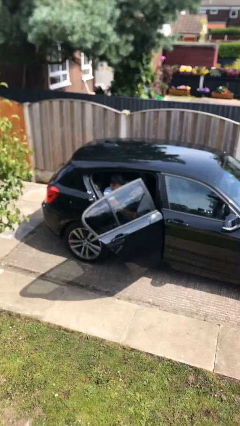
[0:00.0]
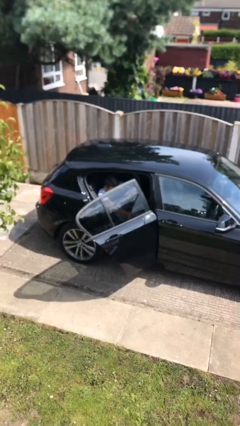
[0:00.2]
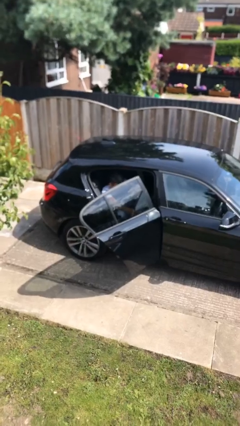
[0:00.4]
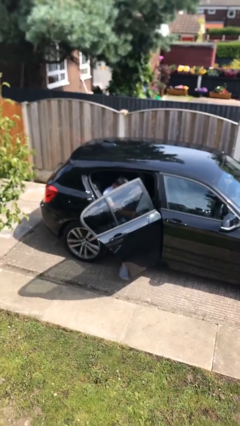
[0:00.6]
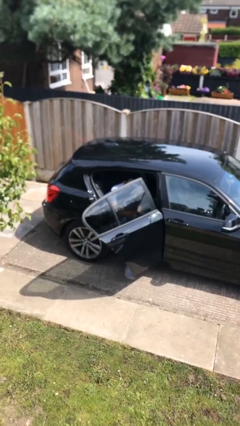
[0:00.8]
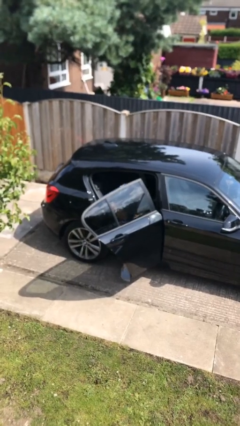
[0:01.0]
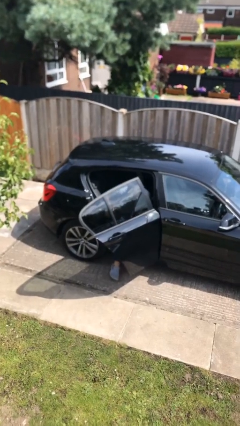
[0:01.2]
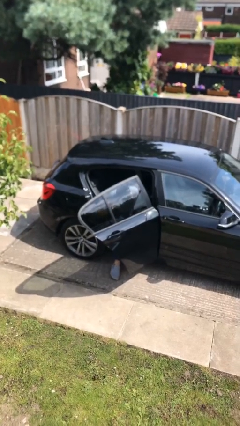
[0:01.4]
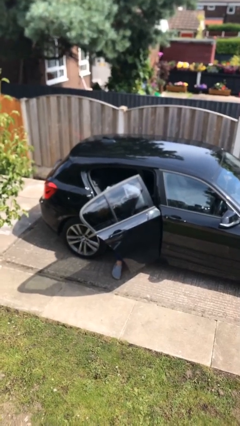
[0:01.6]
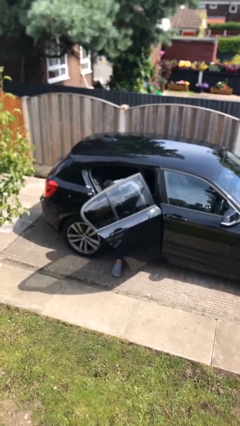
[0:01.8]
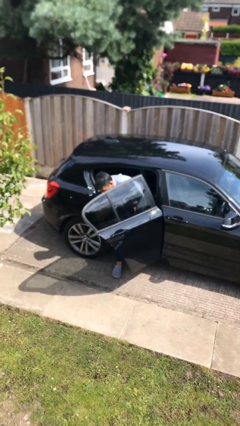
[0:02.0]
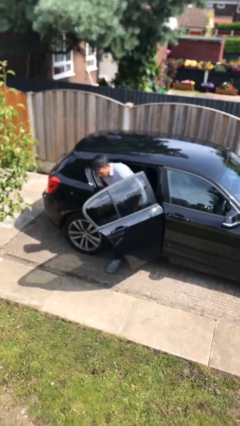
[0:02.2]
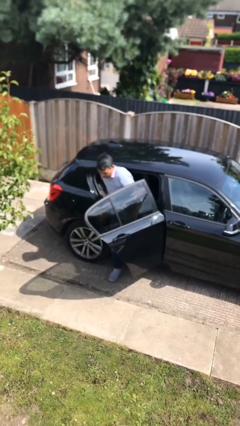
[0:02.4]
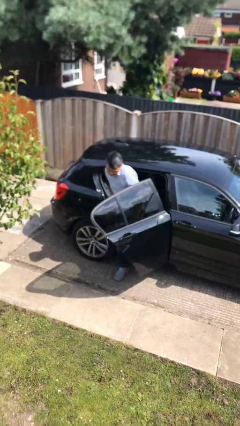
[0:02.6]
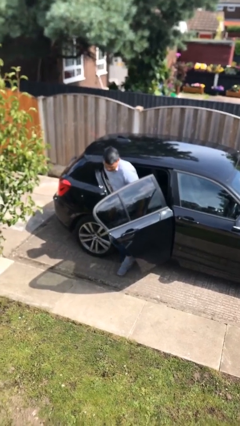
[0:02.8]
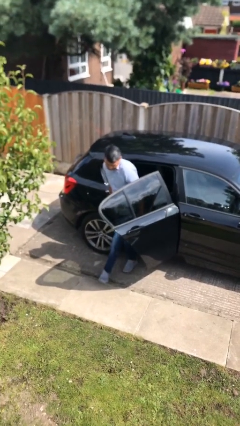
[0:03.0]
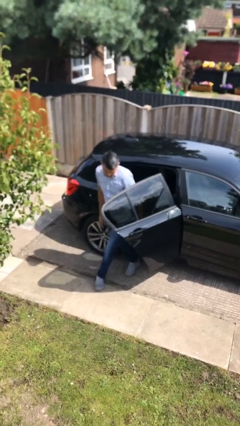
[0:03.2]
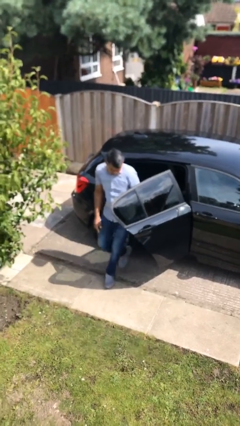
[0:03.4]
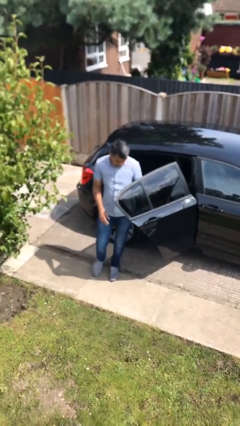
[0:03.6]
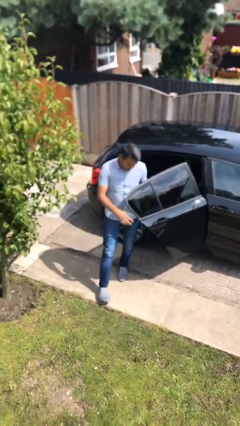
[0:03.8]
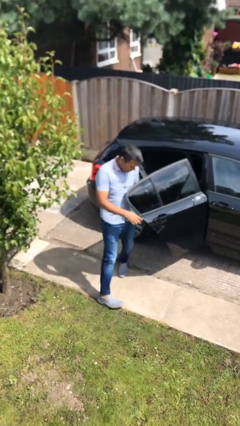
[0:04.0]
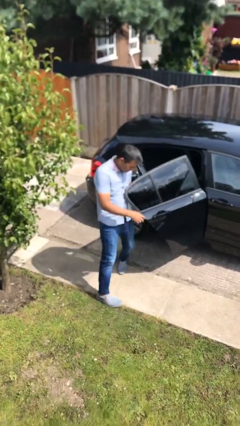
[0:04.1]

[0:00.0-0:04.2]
person exits car

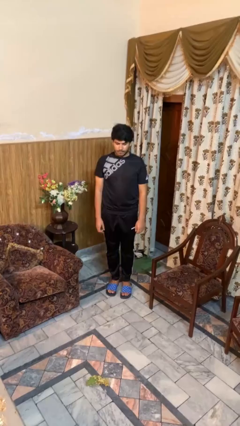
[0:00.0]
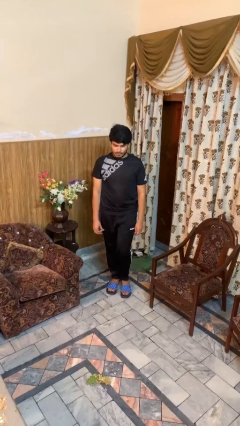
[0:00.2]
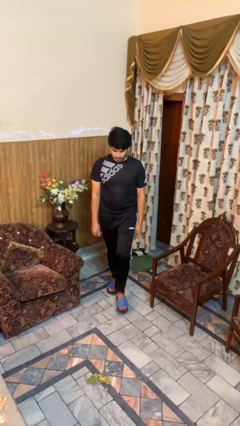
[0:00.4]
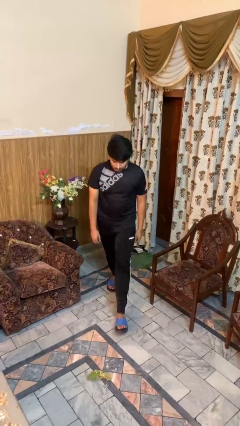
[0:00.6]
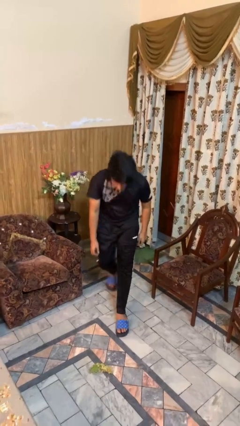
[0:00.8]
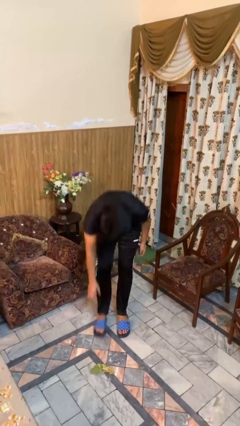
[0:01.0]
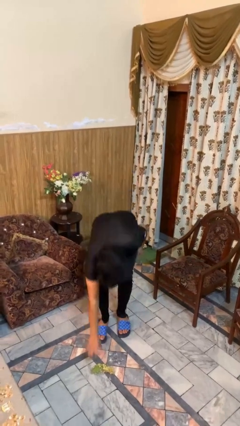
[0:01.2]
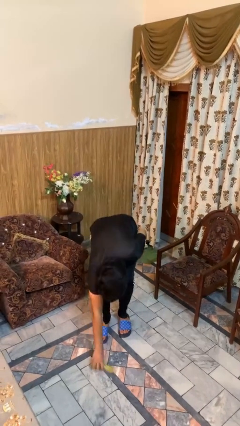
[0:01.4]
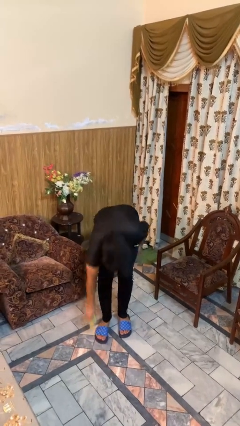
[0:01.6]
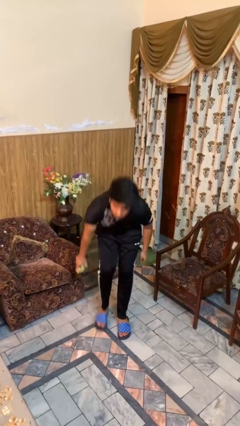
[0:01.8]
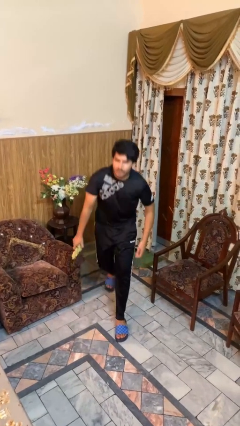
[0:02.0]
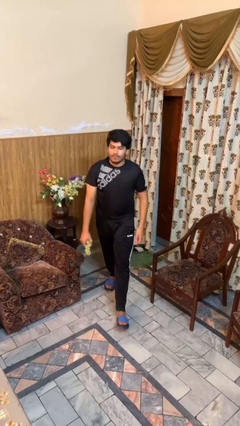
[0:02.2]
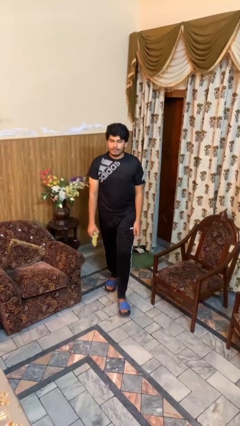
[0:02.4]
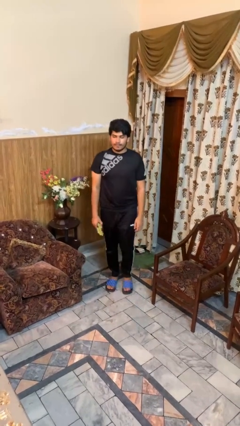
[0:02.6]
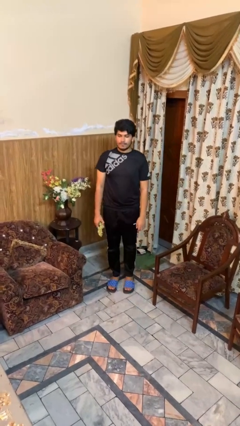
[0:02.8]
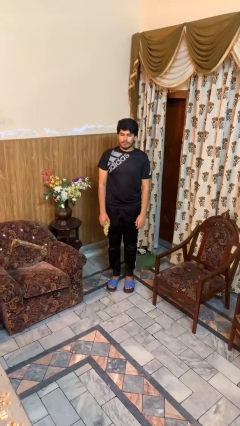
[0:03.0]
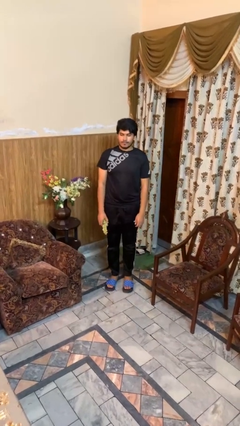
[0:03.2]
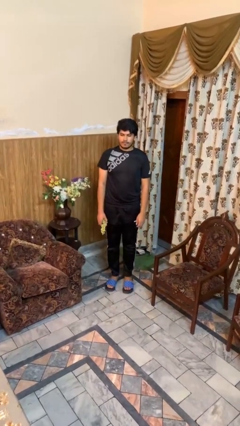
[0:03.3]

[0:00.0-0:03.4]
person picks up object from floor

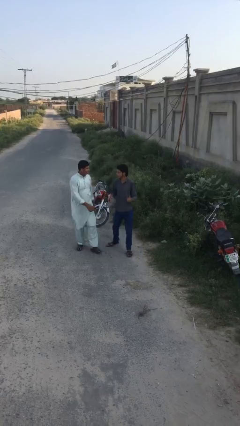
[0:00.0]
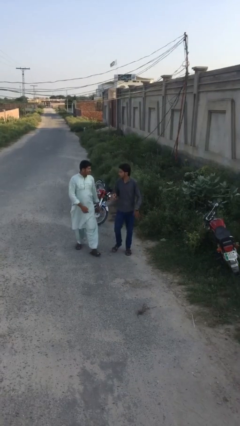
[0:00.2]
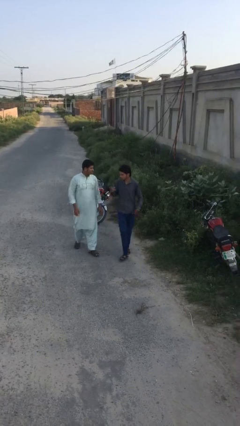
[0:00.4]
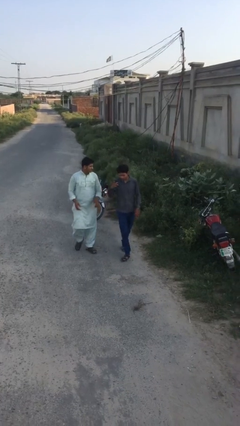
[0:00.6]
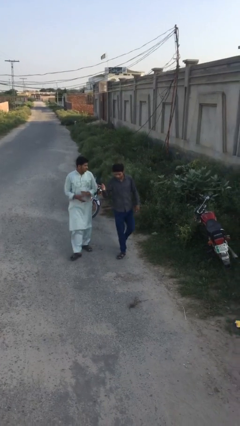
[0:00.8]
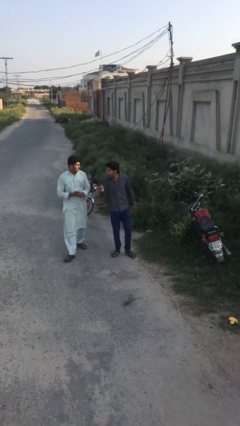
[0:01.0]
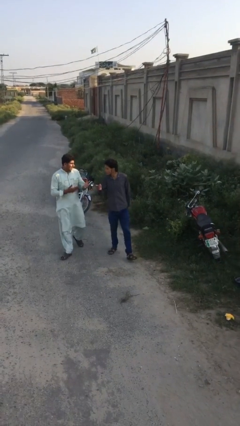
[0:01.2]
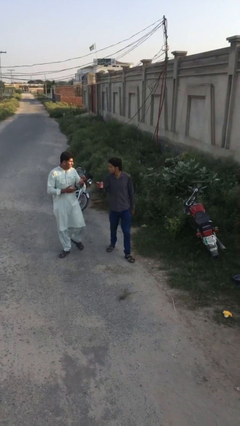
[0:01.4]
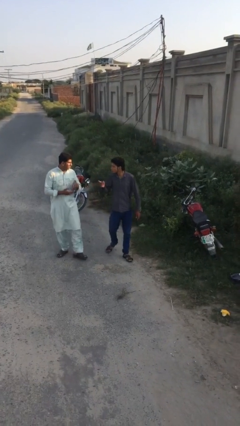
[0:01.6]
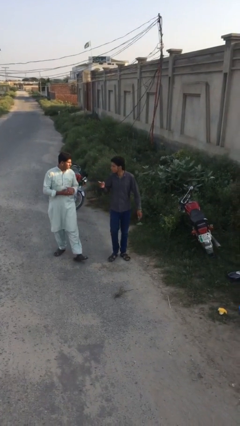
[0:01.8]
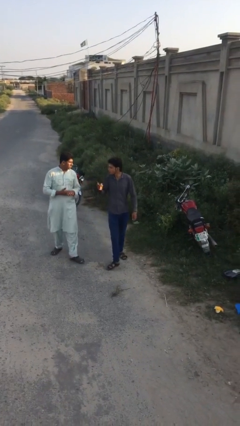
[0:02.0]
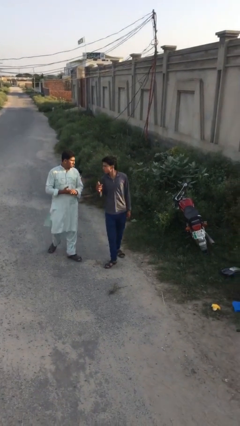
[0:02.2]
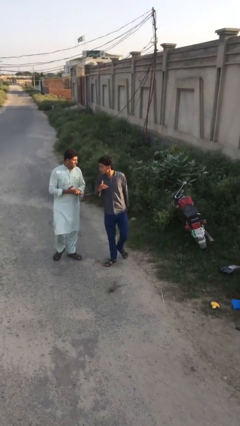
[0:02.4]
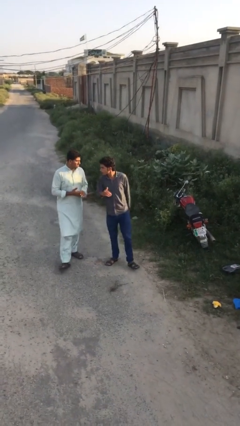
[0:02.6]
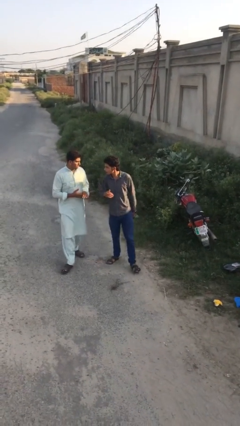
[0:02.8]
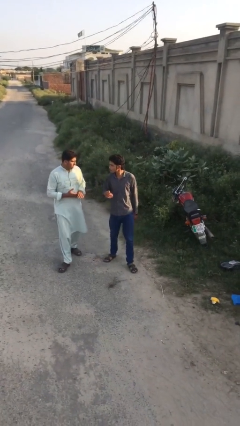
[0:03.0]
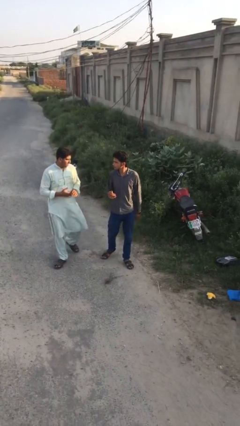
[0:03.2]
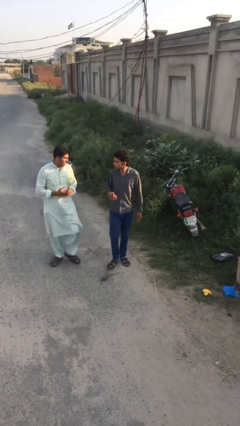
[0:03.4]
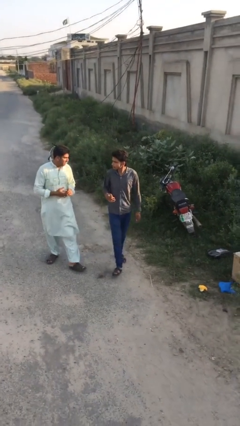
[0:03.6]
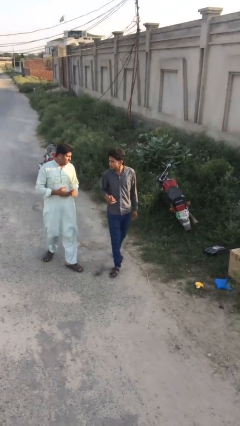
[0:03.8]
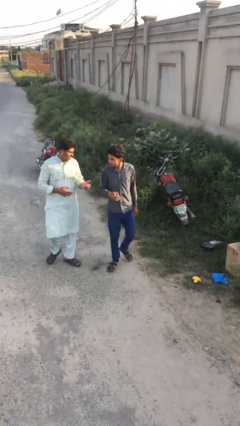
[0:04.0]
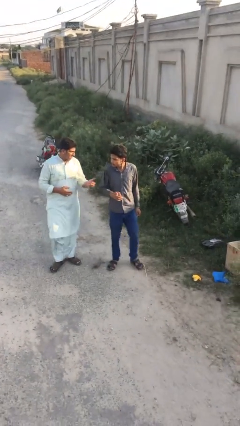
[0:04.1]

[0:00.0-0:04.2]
person talks to person

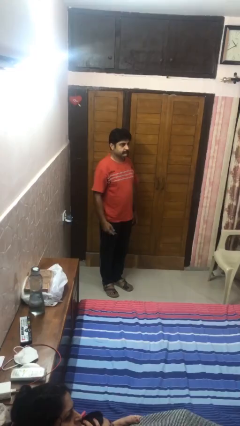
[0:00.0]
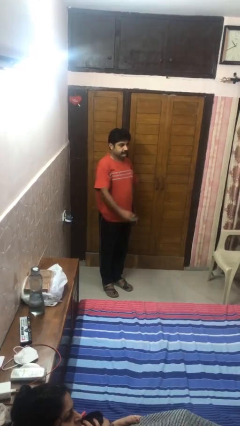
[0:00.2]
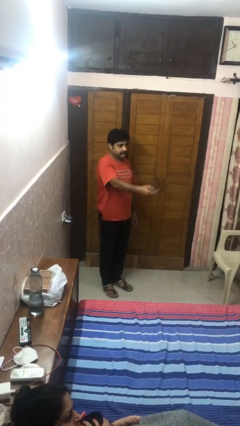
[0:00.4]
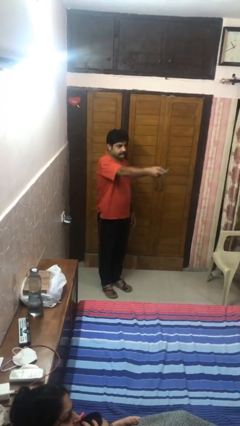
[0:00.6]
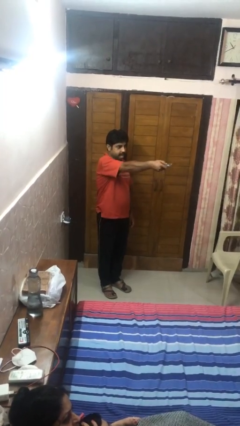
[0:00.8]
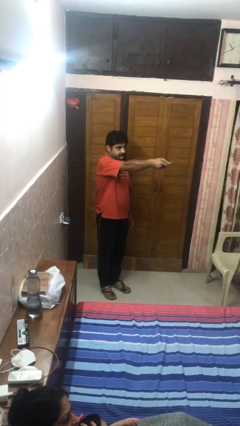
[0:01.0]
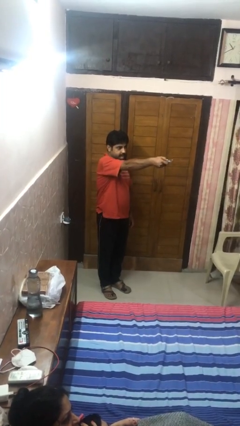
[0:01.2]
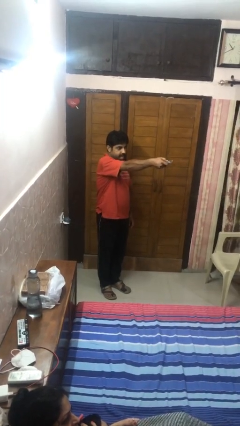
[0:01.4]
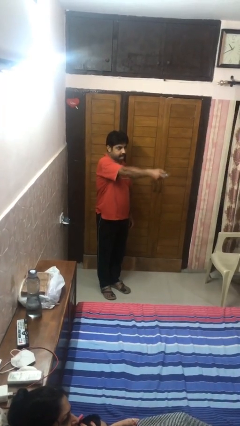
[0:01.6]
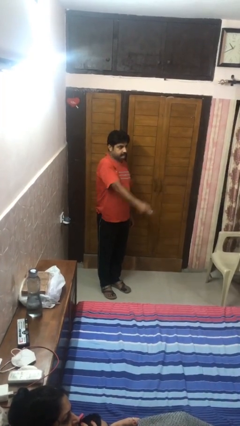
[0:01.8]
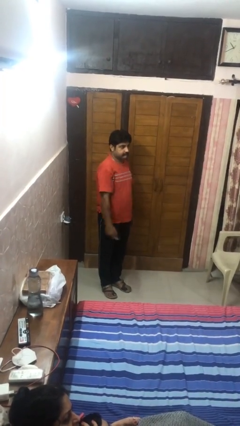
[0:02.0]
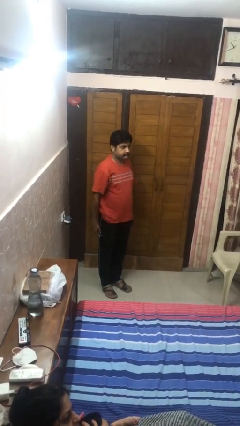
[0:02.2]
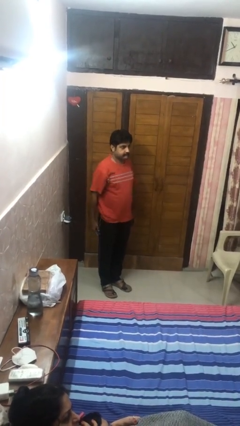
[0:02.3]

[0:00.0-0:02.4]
person uses television remote

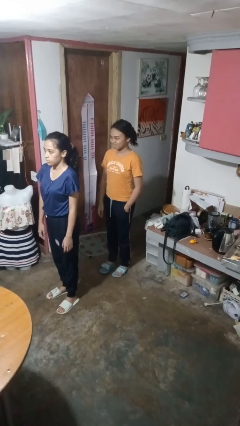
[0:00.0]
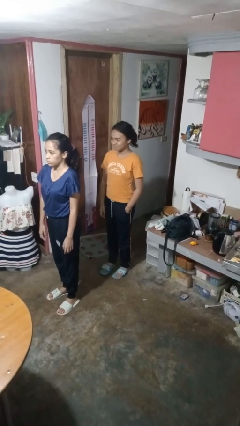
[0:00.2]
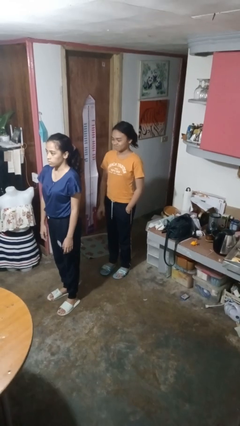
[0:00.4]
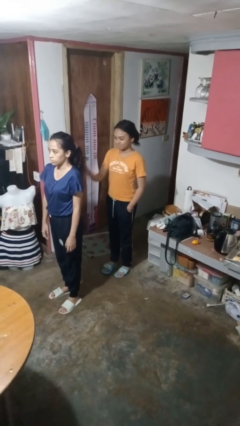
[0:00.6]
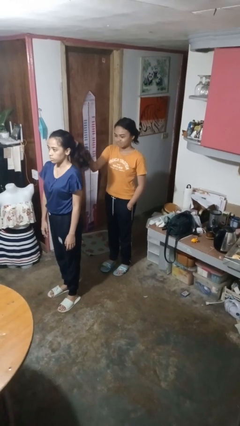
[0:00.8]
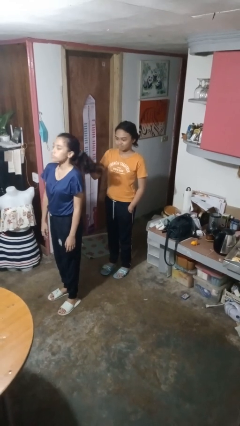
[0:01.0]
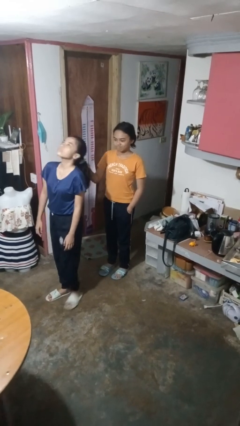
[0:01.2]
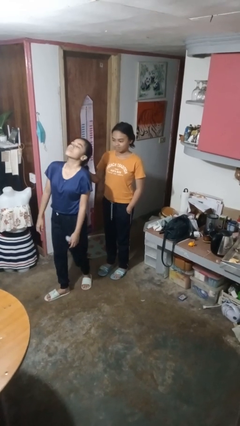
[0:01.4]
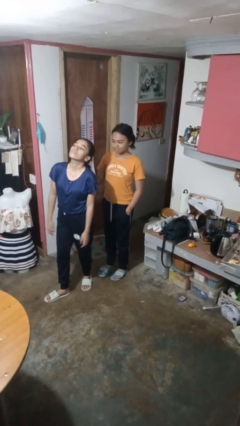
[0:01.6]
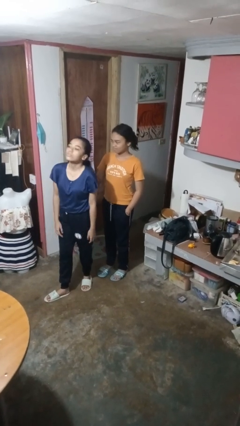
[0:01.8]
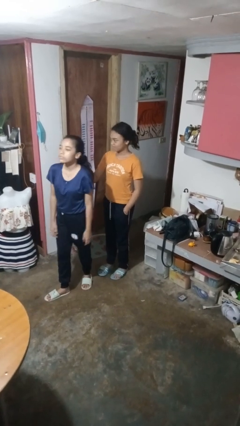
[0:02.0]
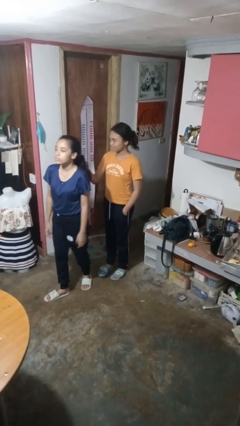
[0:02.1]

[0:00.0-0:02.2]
person grabs person by hair

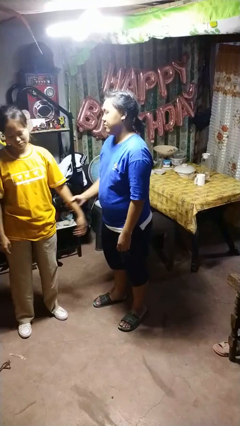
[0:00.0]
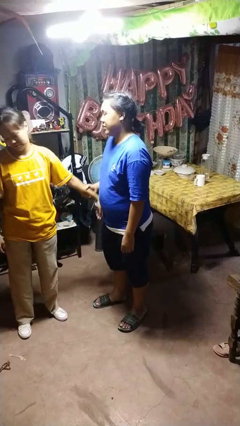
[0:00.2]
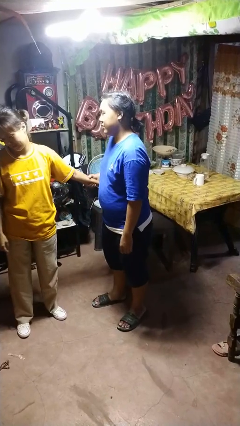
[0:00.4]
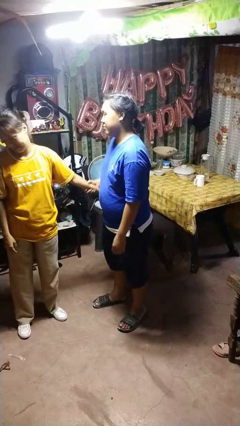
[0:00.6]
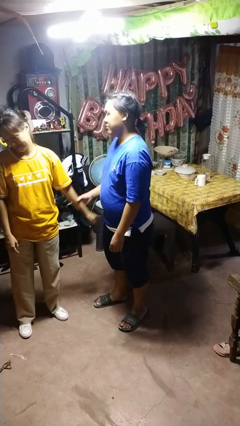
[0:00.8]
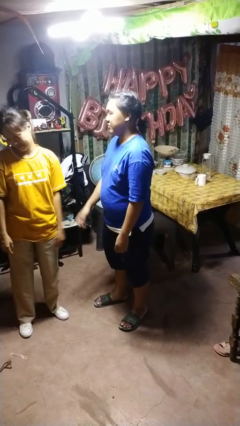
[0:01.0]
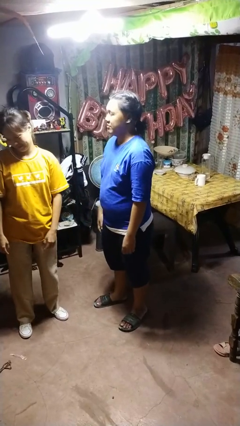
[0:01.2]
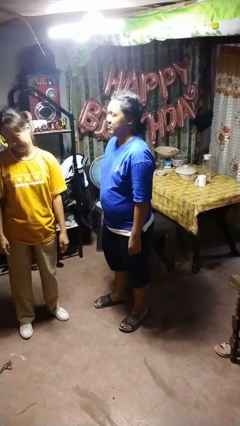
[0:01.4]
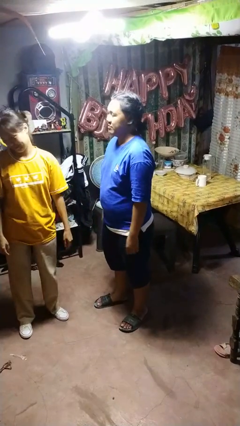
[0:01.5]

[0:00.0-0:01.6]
person grabs person by forearm
